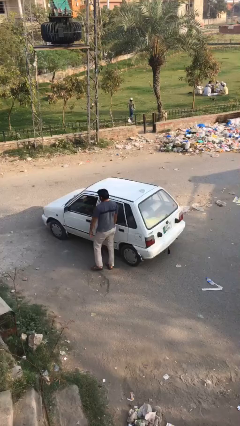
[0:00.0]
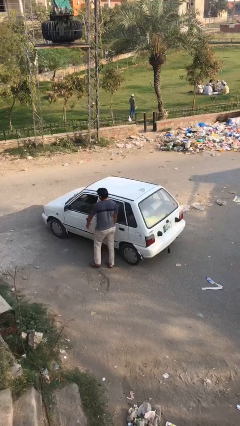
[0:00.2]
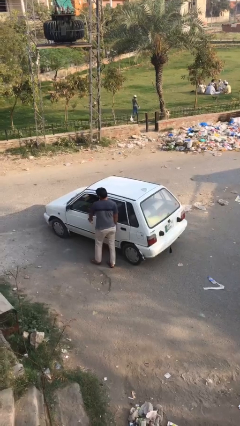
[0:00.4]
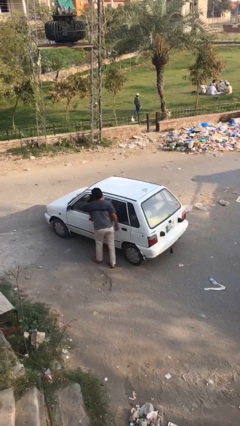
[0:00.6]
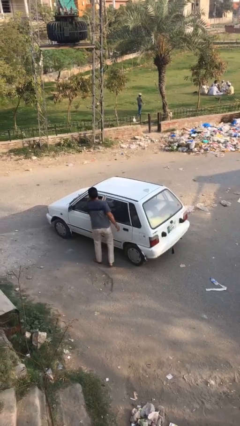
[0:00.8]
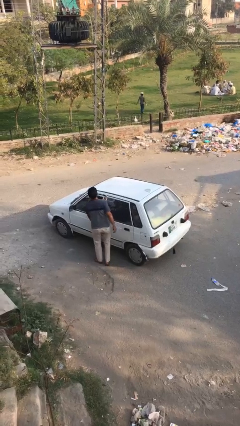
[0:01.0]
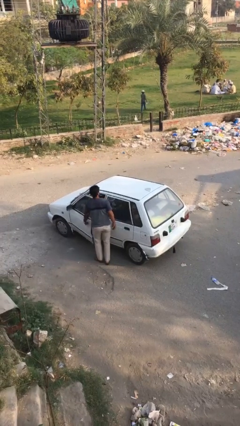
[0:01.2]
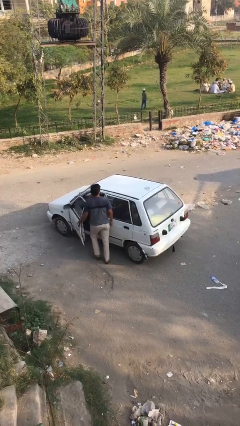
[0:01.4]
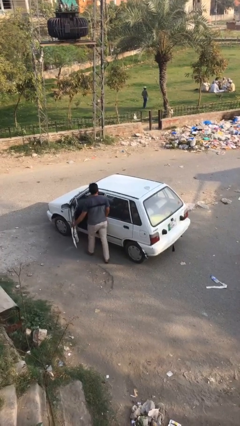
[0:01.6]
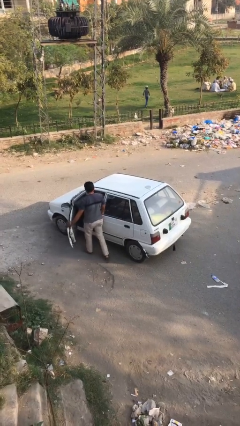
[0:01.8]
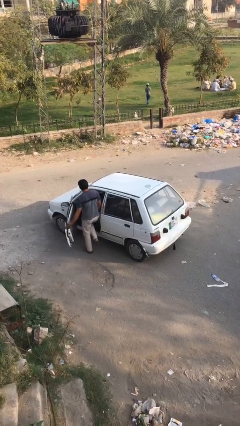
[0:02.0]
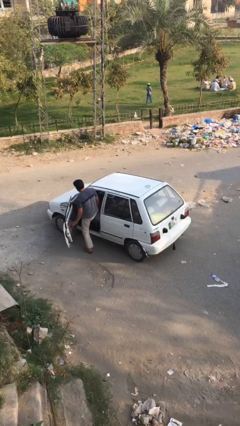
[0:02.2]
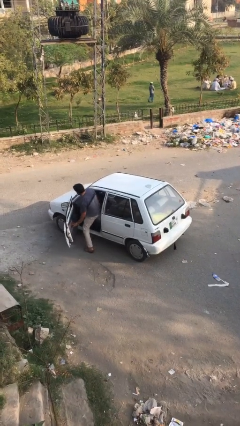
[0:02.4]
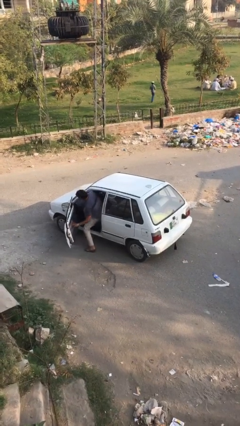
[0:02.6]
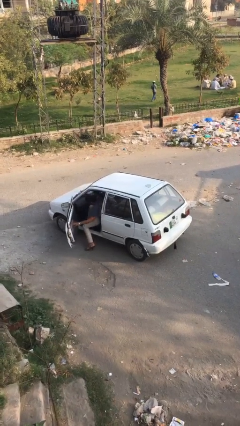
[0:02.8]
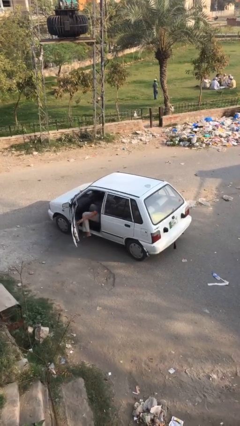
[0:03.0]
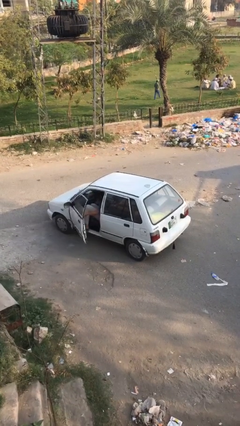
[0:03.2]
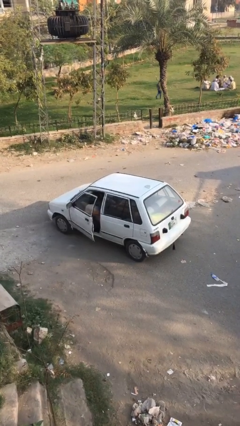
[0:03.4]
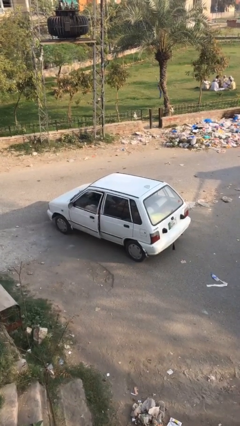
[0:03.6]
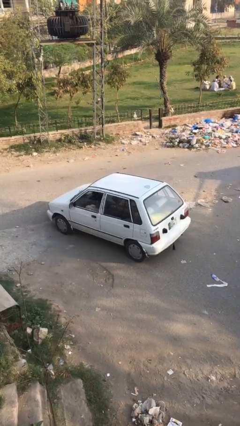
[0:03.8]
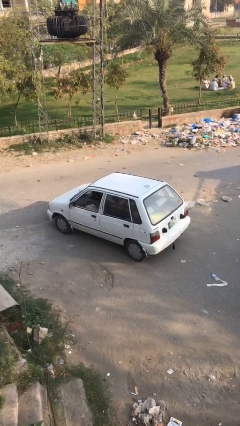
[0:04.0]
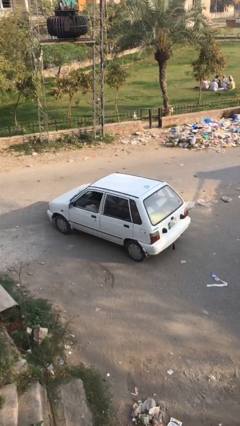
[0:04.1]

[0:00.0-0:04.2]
car picks up person

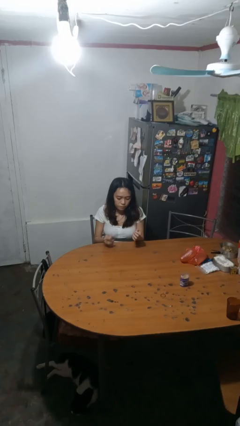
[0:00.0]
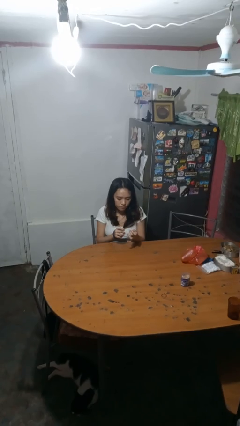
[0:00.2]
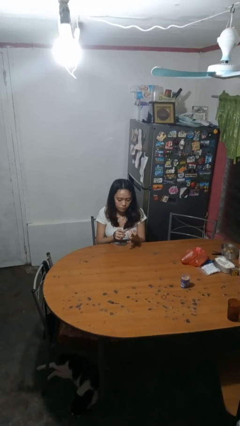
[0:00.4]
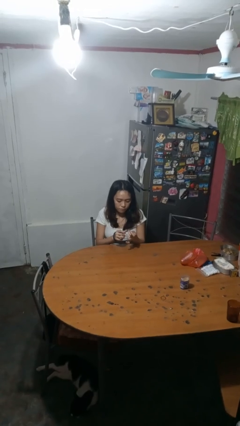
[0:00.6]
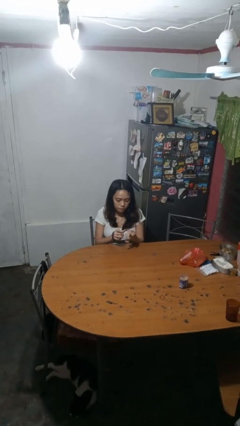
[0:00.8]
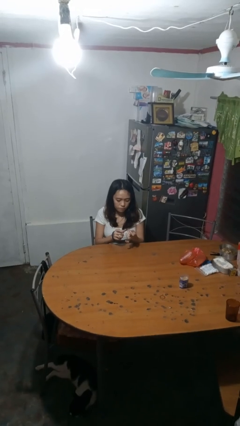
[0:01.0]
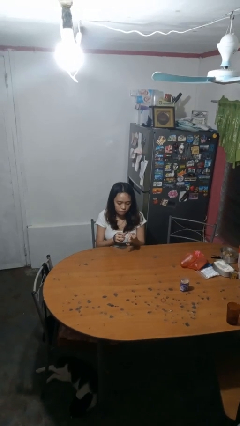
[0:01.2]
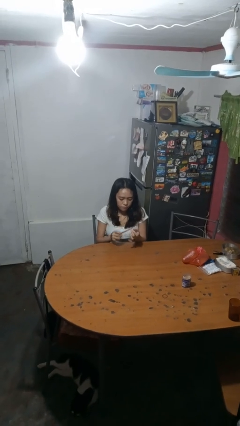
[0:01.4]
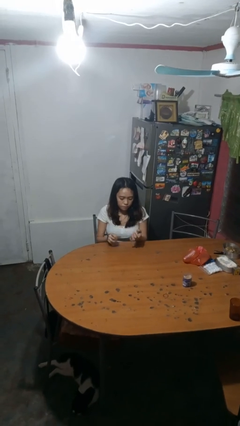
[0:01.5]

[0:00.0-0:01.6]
person files fingernails

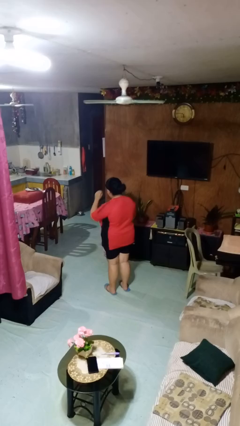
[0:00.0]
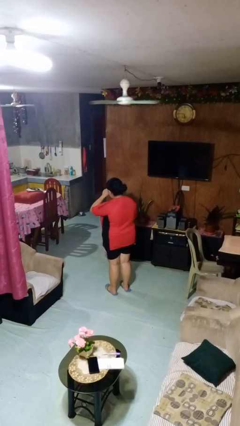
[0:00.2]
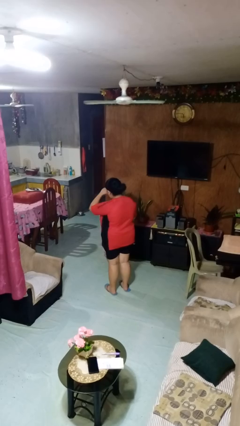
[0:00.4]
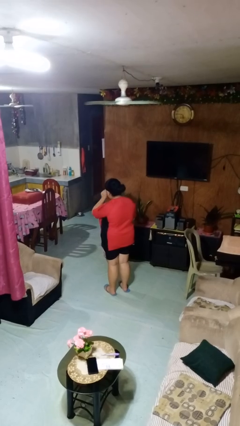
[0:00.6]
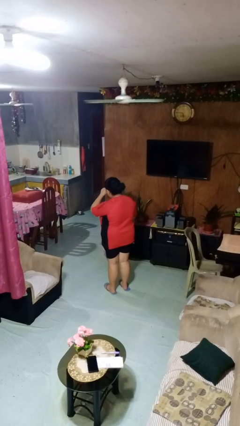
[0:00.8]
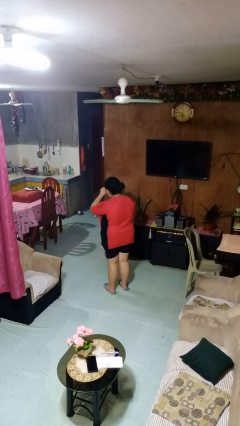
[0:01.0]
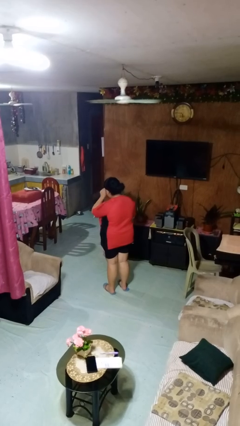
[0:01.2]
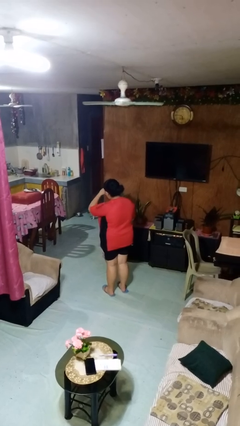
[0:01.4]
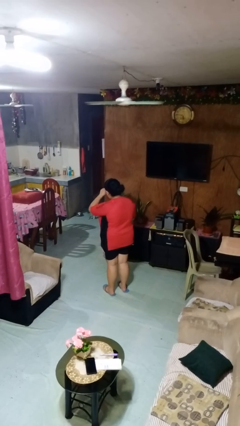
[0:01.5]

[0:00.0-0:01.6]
person rubs eyes

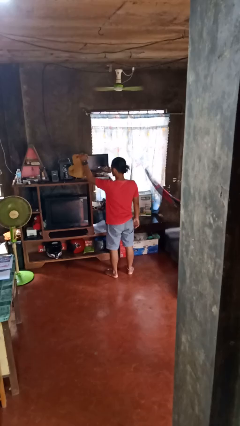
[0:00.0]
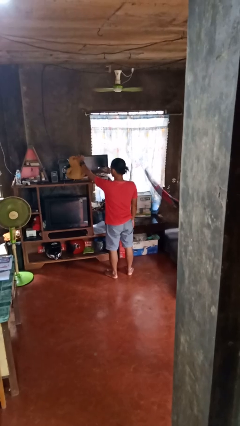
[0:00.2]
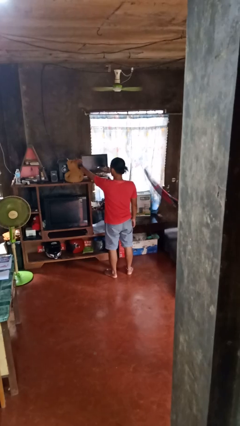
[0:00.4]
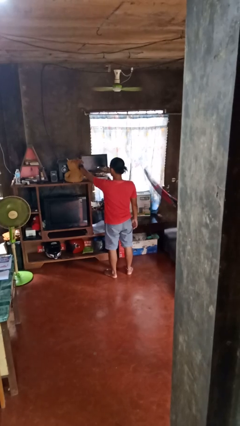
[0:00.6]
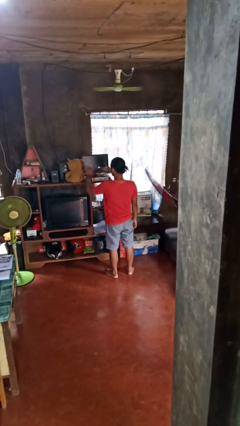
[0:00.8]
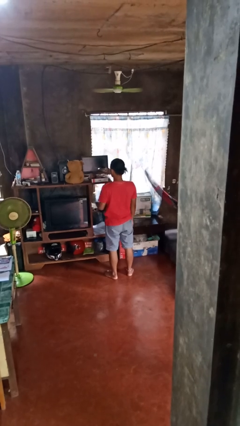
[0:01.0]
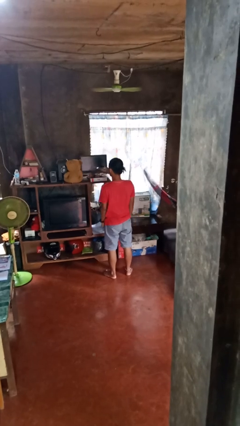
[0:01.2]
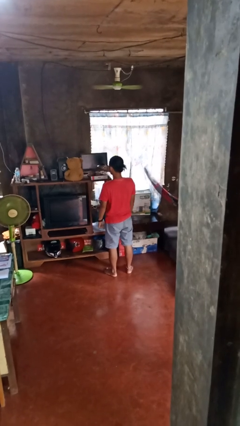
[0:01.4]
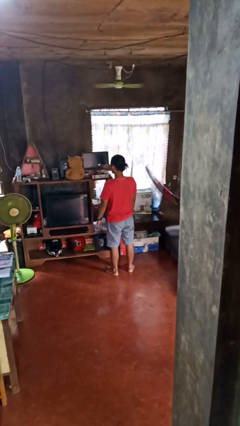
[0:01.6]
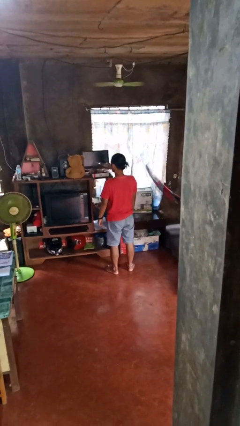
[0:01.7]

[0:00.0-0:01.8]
person puts down object on shelf

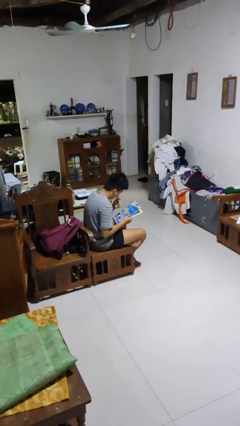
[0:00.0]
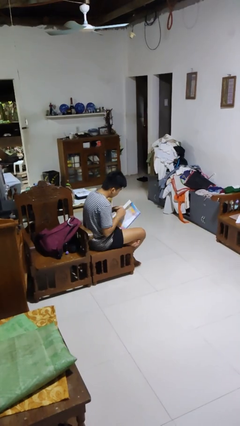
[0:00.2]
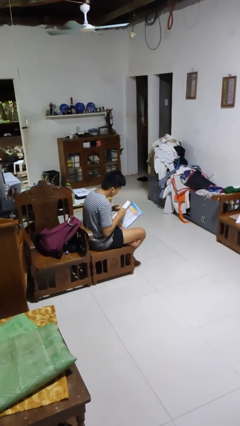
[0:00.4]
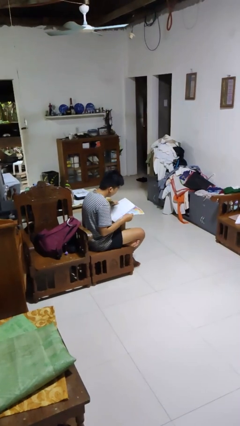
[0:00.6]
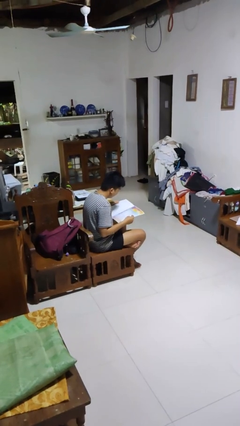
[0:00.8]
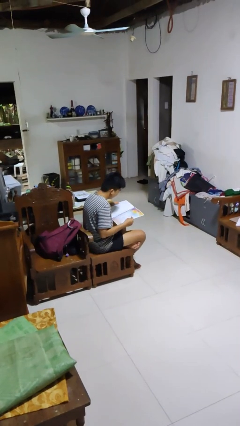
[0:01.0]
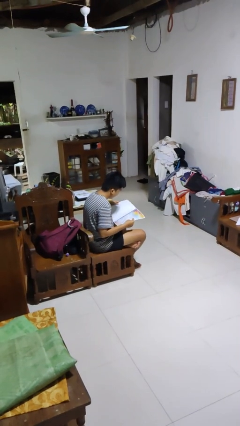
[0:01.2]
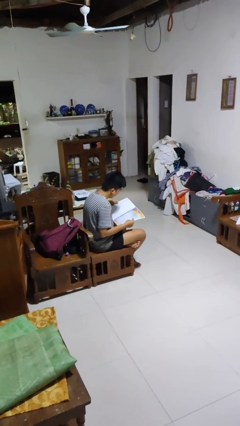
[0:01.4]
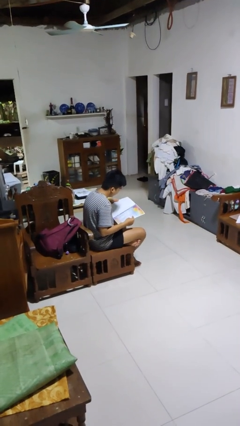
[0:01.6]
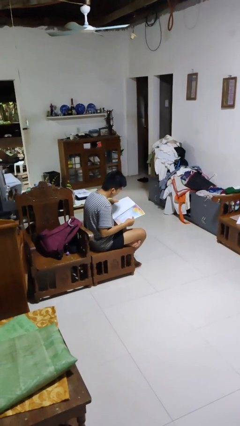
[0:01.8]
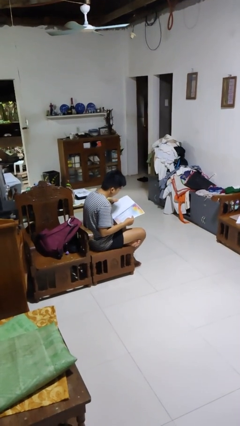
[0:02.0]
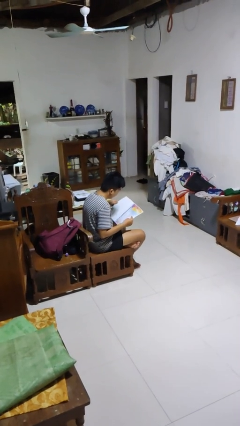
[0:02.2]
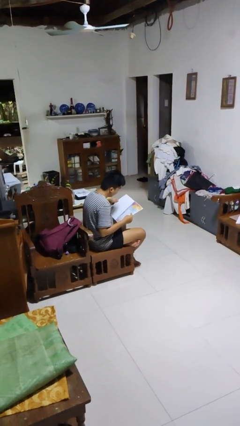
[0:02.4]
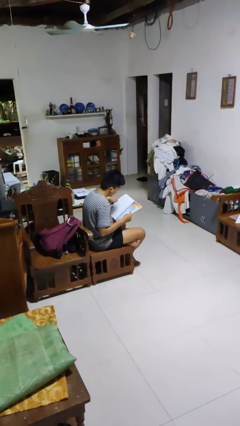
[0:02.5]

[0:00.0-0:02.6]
person reads magazine

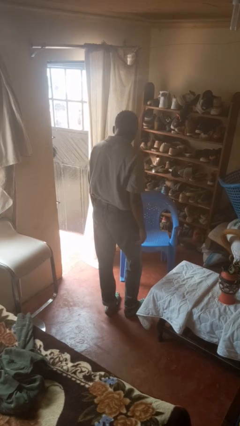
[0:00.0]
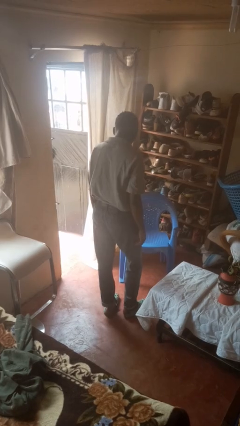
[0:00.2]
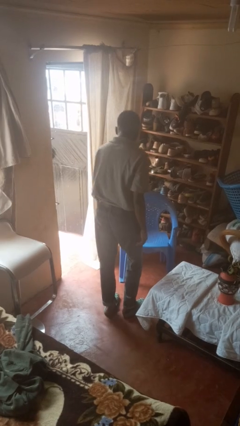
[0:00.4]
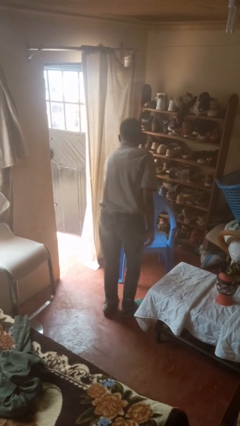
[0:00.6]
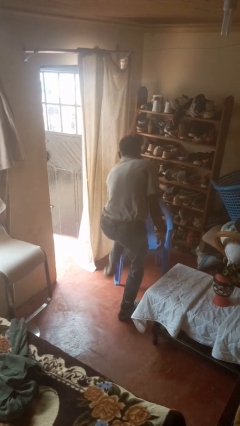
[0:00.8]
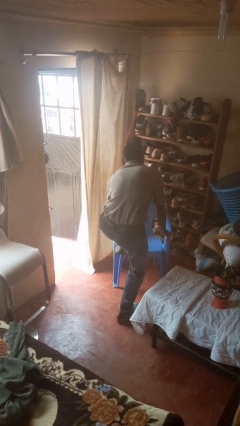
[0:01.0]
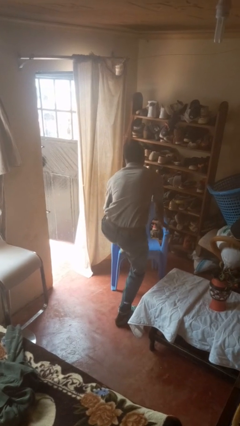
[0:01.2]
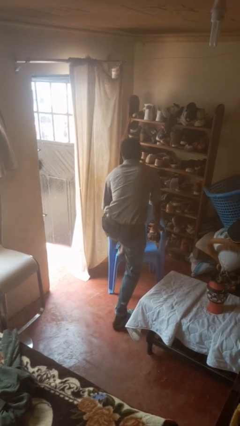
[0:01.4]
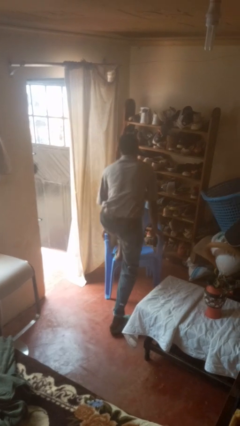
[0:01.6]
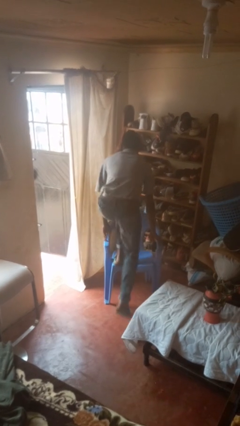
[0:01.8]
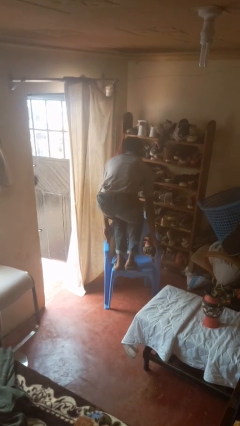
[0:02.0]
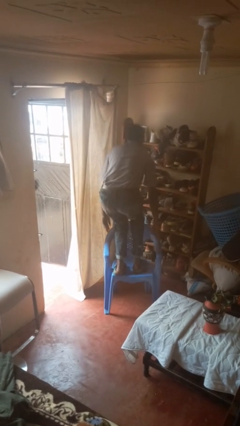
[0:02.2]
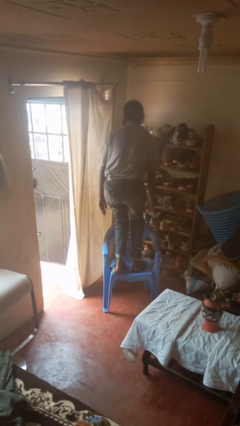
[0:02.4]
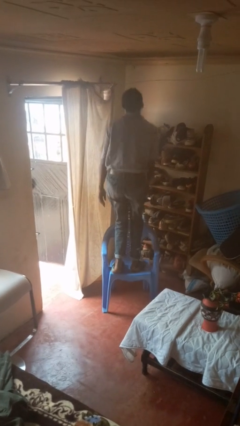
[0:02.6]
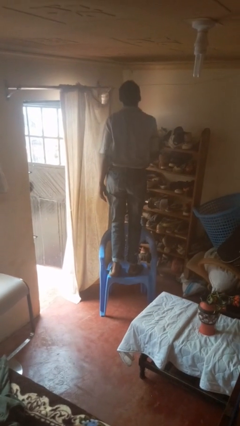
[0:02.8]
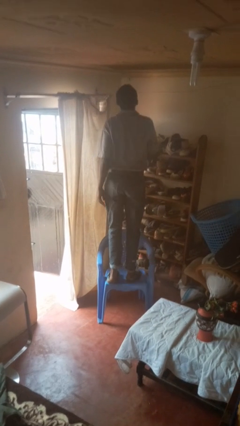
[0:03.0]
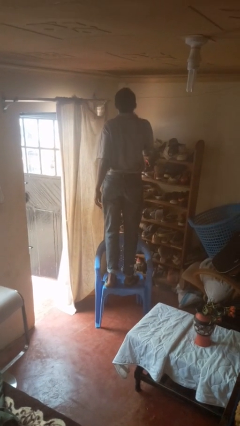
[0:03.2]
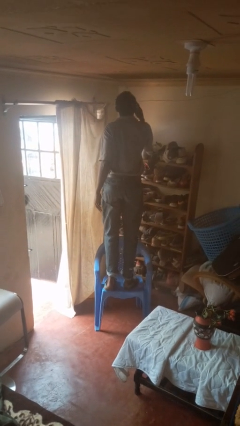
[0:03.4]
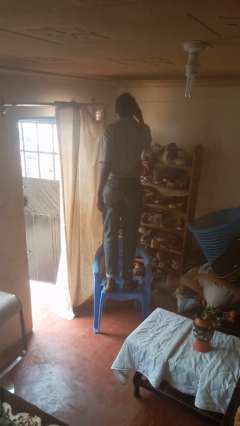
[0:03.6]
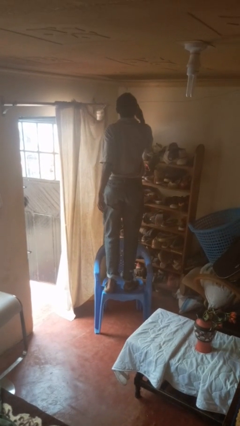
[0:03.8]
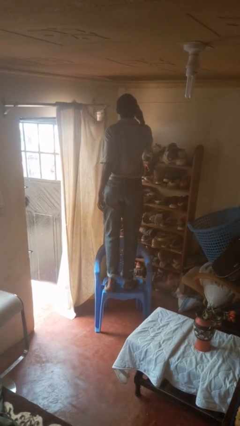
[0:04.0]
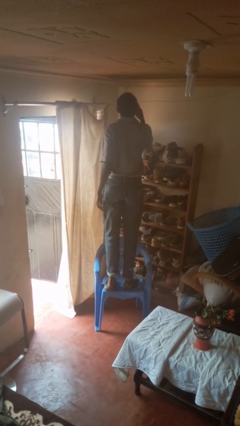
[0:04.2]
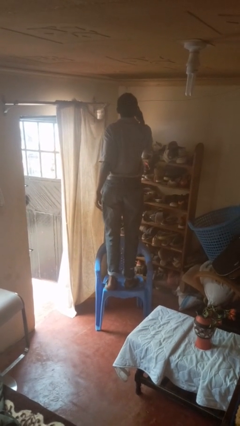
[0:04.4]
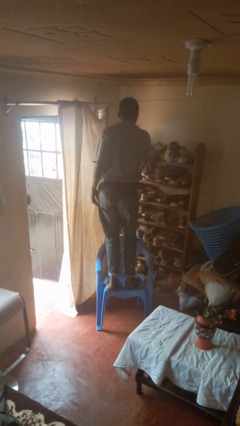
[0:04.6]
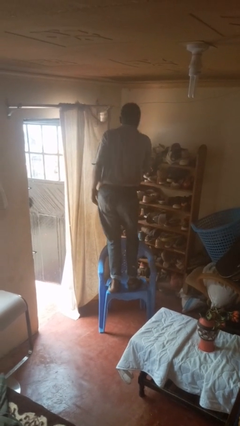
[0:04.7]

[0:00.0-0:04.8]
person climbs on chair

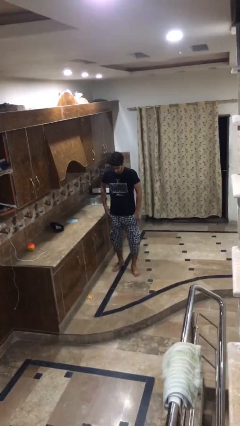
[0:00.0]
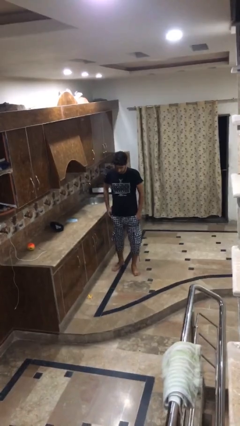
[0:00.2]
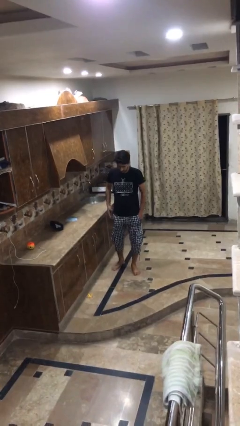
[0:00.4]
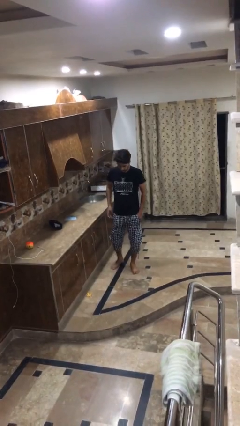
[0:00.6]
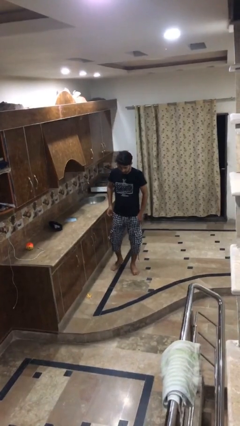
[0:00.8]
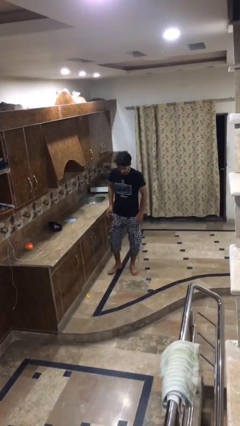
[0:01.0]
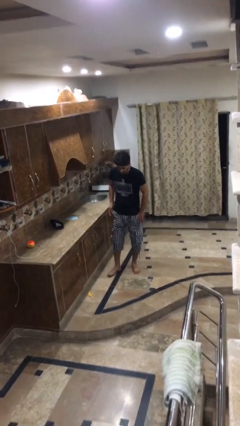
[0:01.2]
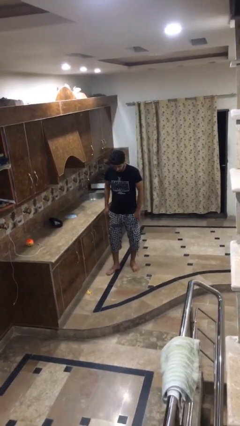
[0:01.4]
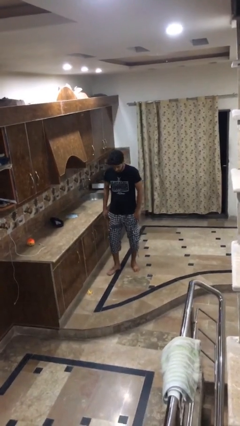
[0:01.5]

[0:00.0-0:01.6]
person puts phone into pocket
